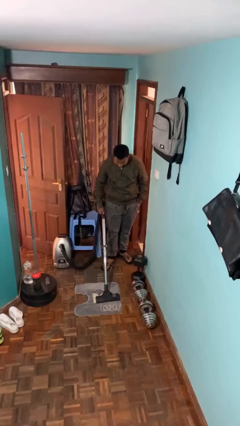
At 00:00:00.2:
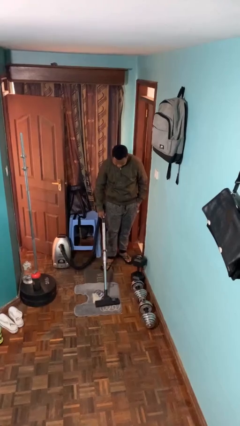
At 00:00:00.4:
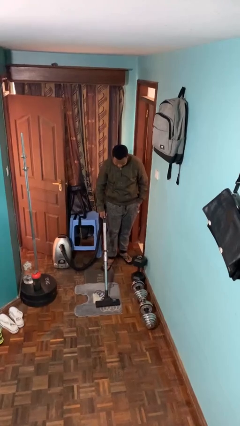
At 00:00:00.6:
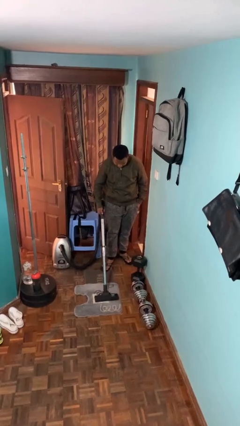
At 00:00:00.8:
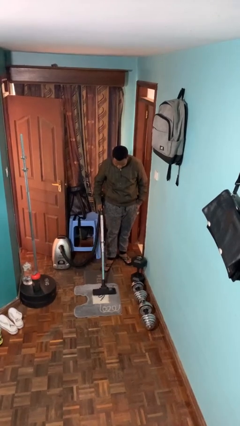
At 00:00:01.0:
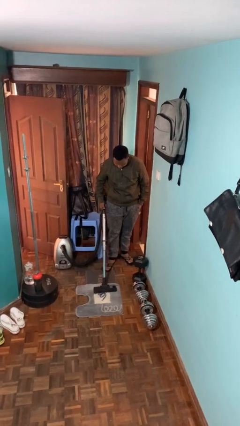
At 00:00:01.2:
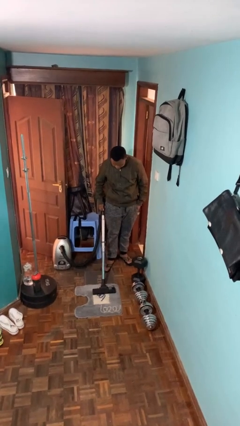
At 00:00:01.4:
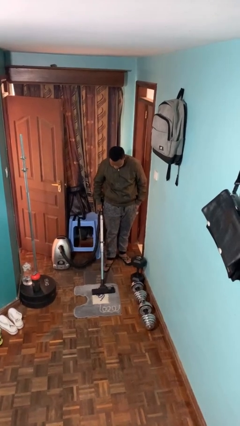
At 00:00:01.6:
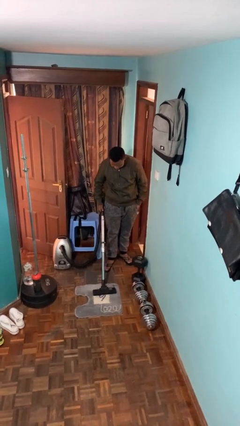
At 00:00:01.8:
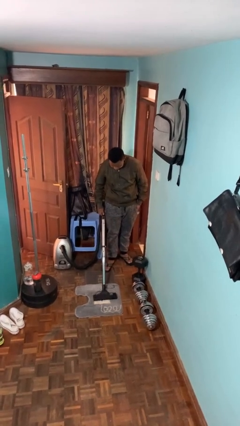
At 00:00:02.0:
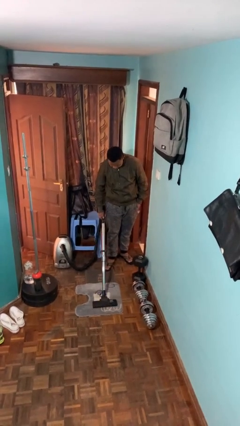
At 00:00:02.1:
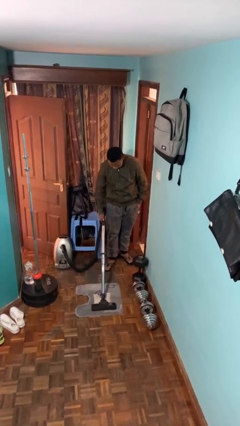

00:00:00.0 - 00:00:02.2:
person vacuums carpet

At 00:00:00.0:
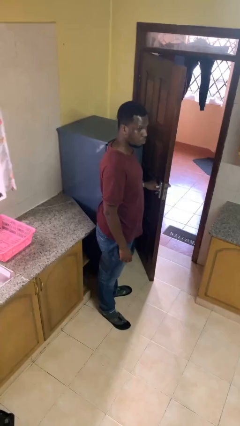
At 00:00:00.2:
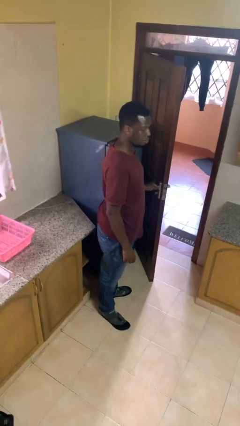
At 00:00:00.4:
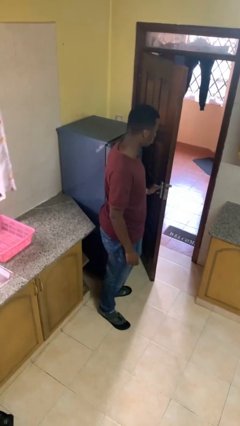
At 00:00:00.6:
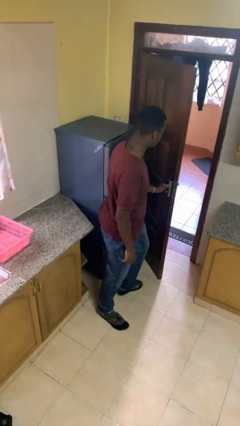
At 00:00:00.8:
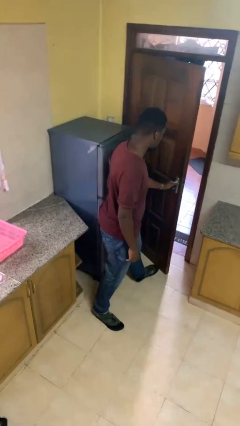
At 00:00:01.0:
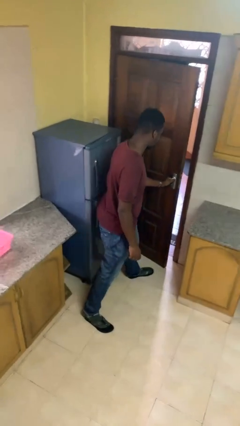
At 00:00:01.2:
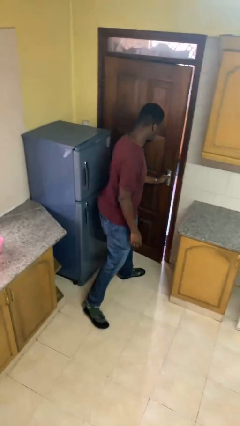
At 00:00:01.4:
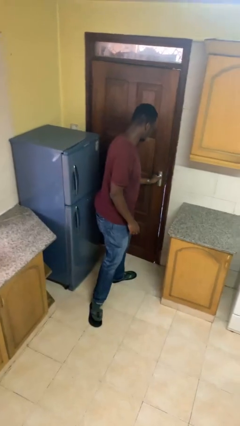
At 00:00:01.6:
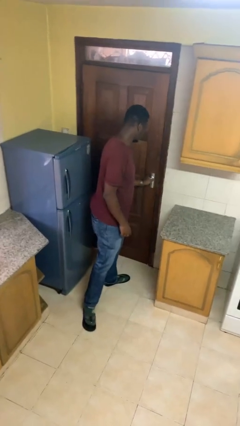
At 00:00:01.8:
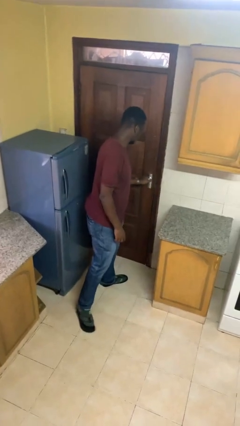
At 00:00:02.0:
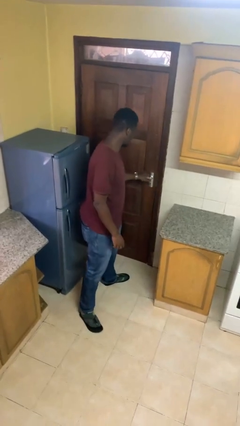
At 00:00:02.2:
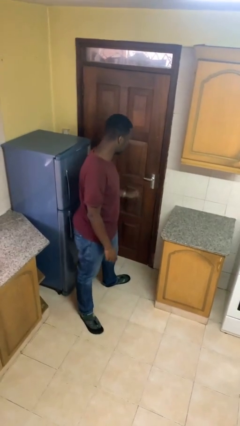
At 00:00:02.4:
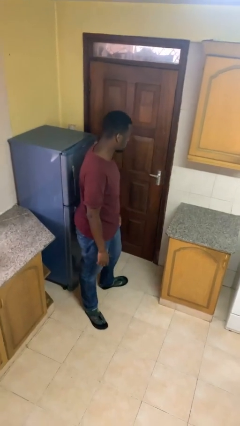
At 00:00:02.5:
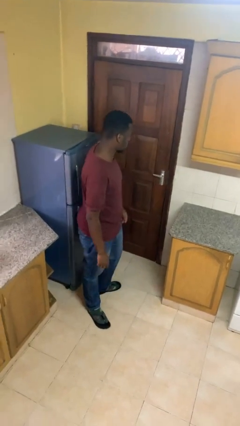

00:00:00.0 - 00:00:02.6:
person closes facility door

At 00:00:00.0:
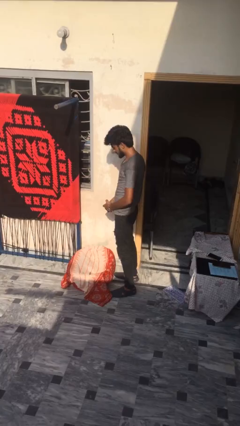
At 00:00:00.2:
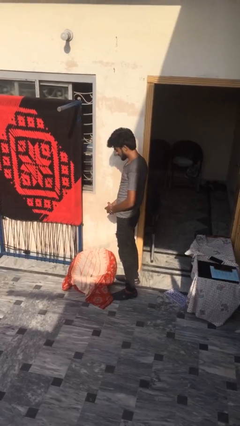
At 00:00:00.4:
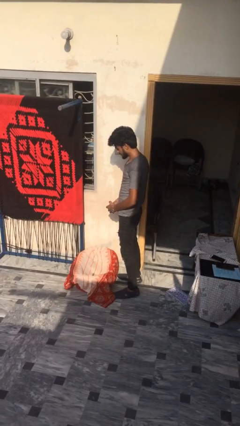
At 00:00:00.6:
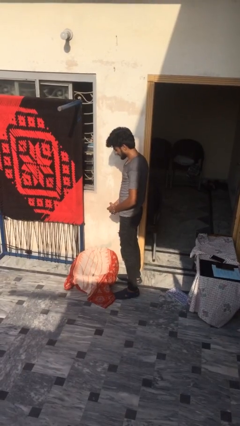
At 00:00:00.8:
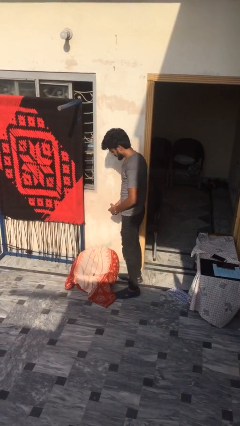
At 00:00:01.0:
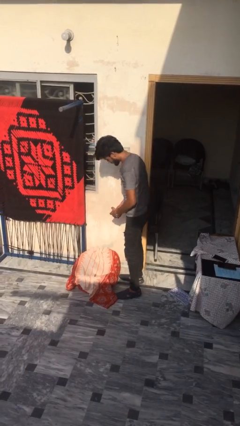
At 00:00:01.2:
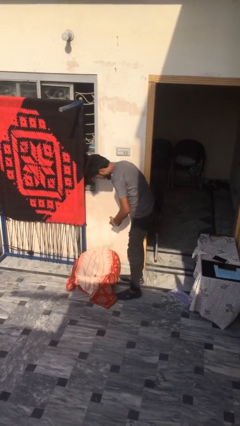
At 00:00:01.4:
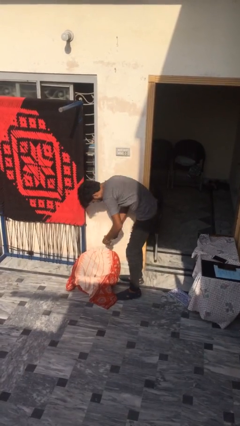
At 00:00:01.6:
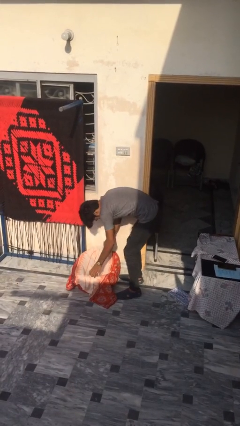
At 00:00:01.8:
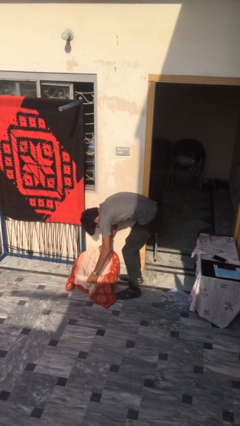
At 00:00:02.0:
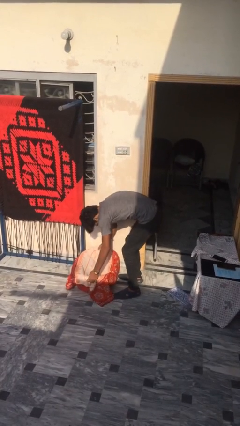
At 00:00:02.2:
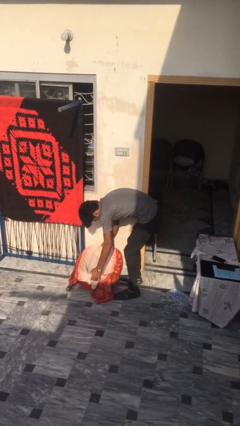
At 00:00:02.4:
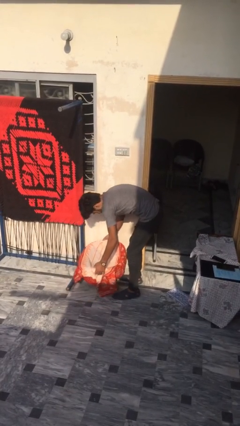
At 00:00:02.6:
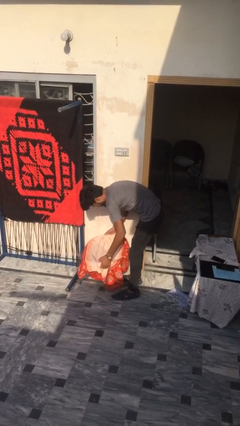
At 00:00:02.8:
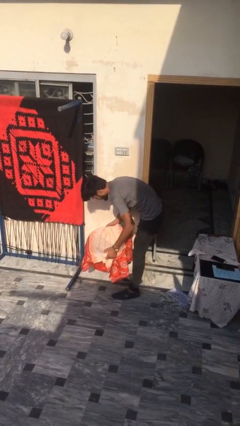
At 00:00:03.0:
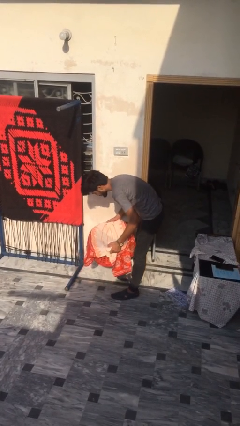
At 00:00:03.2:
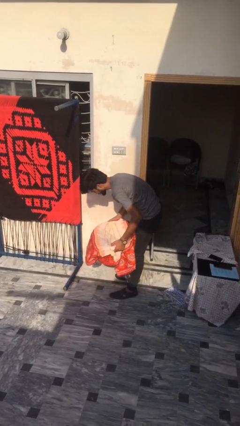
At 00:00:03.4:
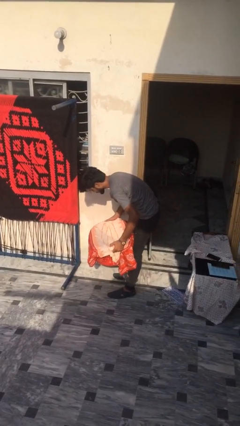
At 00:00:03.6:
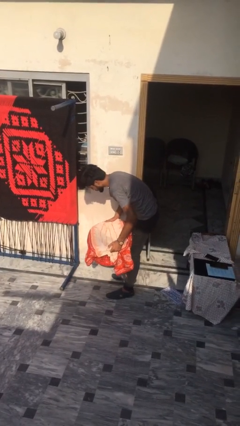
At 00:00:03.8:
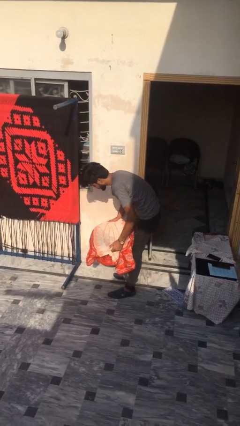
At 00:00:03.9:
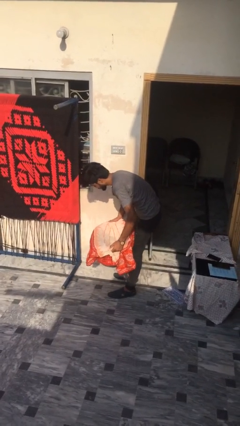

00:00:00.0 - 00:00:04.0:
person picks up object from floor

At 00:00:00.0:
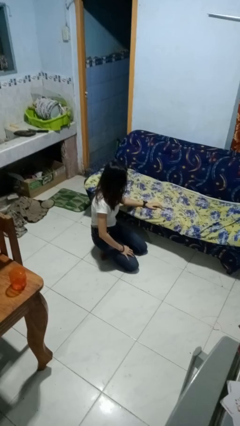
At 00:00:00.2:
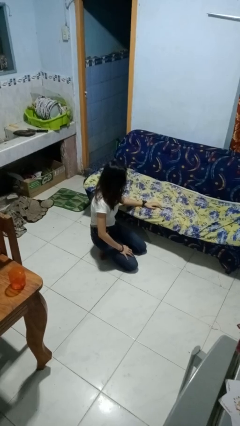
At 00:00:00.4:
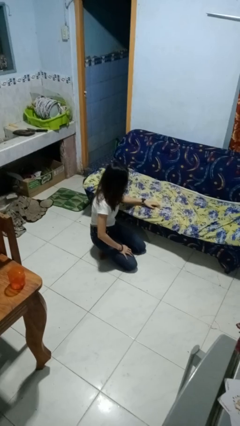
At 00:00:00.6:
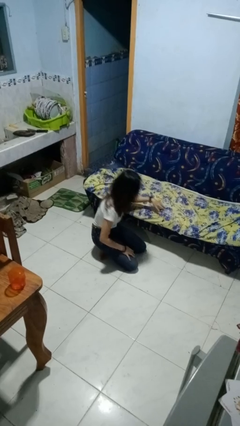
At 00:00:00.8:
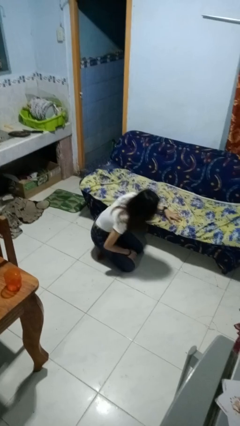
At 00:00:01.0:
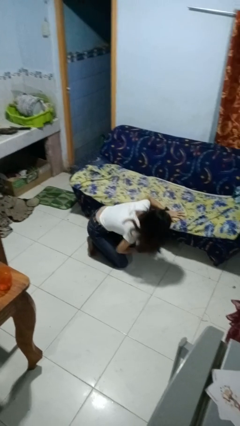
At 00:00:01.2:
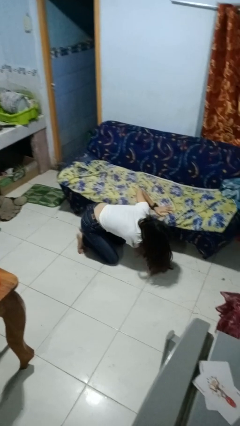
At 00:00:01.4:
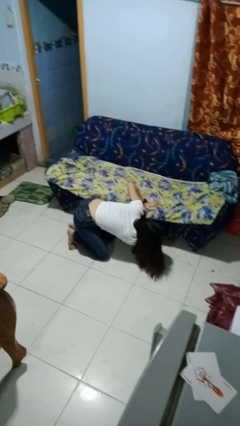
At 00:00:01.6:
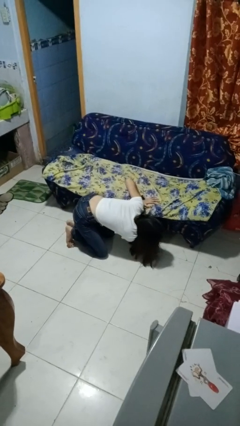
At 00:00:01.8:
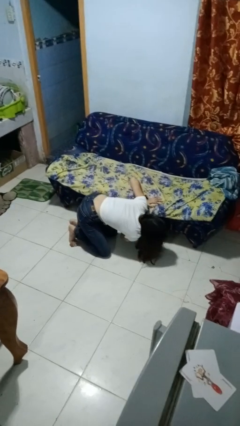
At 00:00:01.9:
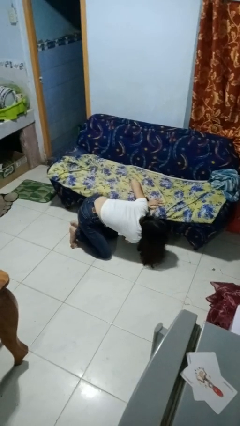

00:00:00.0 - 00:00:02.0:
person searches in couch

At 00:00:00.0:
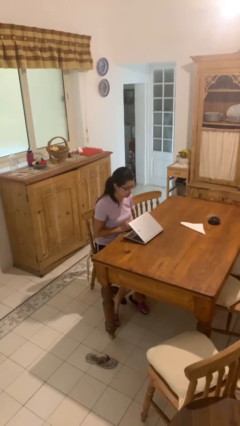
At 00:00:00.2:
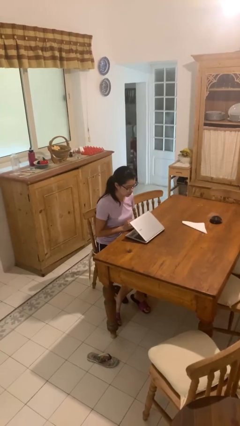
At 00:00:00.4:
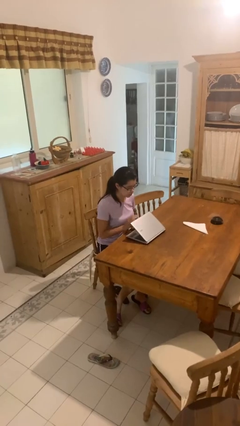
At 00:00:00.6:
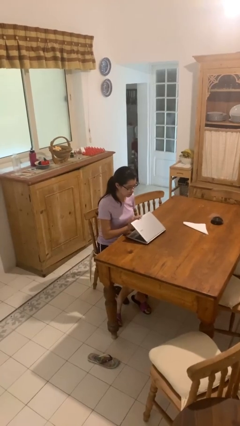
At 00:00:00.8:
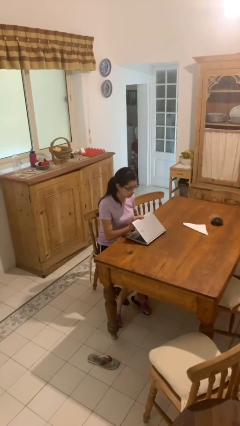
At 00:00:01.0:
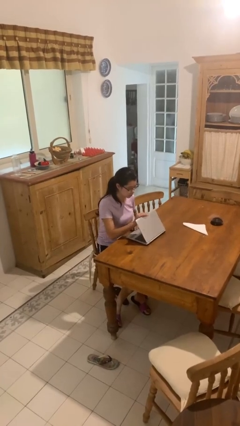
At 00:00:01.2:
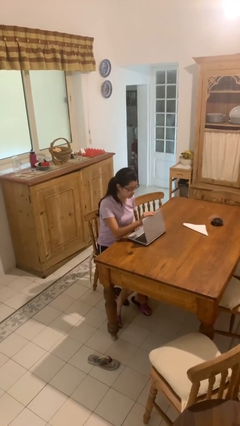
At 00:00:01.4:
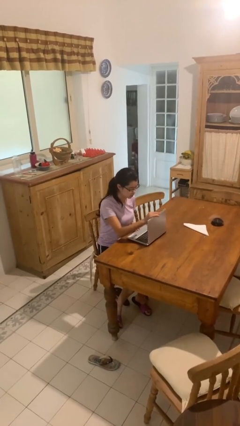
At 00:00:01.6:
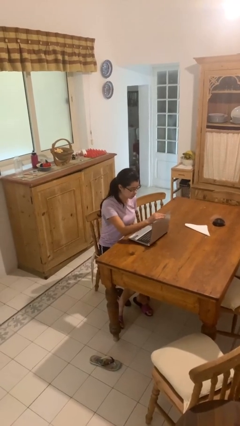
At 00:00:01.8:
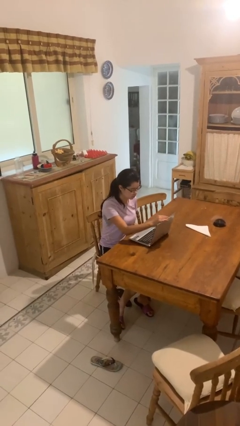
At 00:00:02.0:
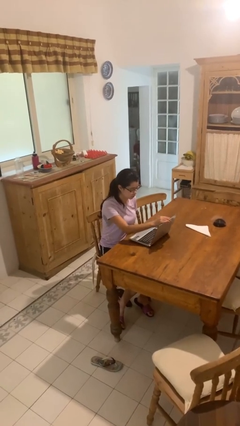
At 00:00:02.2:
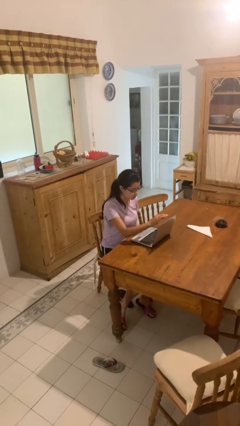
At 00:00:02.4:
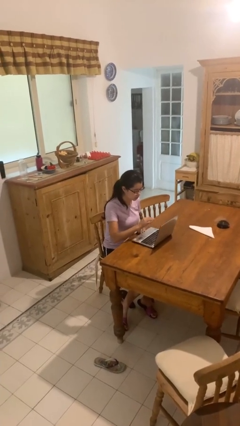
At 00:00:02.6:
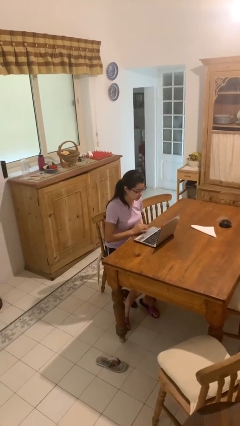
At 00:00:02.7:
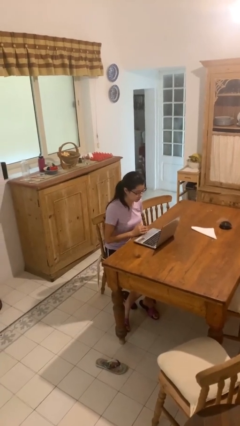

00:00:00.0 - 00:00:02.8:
person opens laptop

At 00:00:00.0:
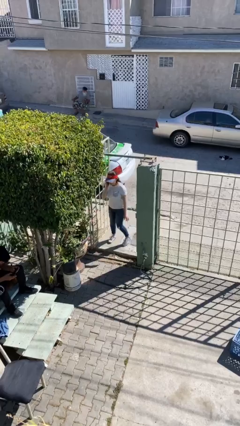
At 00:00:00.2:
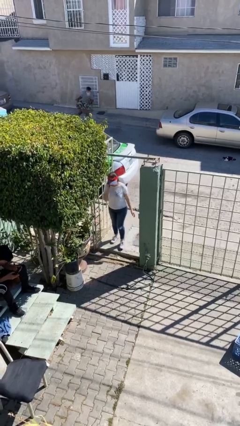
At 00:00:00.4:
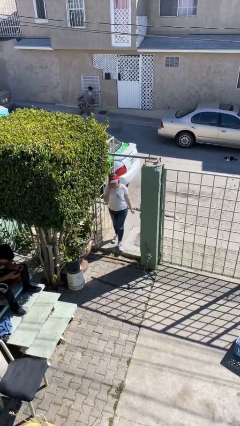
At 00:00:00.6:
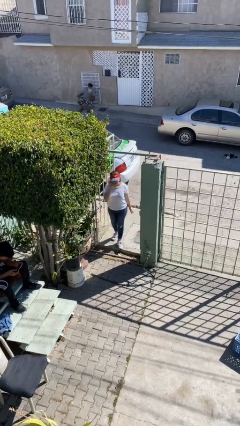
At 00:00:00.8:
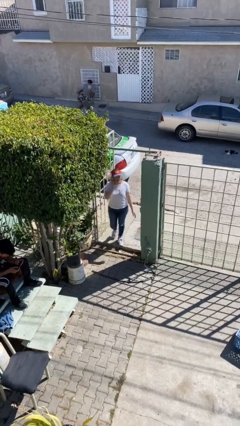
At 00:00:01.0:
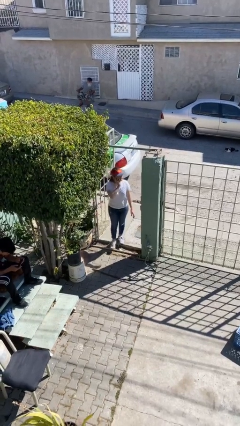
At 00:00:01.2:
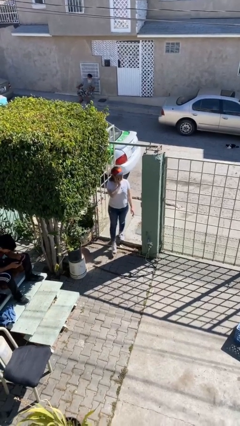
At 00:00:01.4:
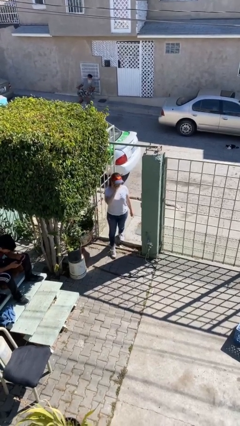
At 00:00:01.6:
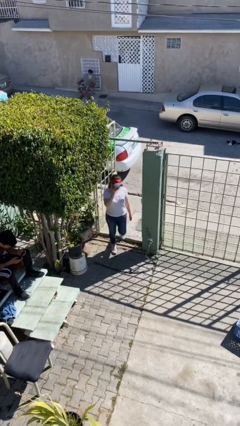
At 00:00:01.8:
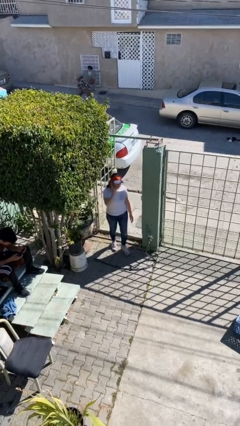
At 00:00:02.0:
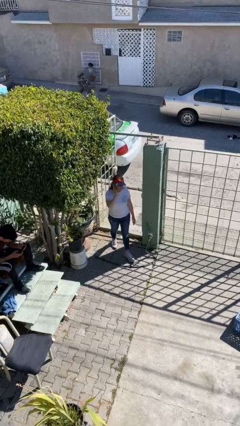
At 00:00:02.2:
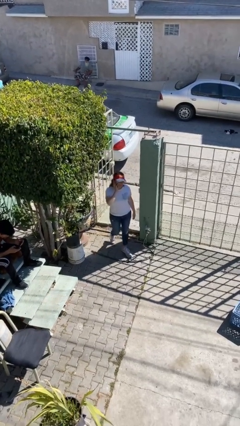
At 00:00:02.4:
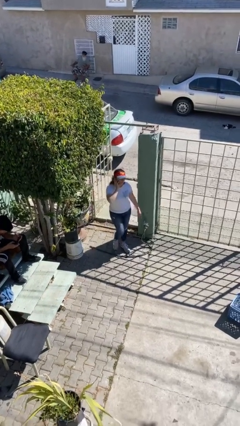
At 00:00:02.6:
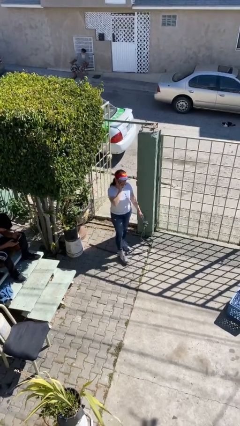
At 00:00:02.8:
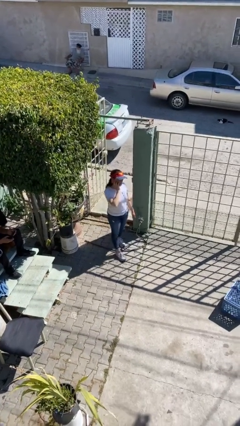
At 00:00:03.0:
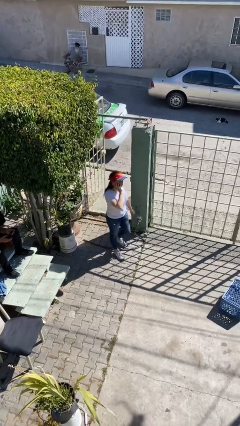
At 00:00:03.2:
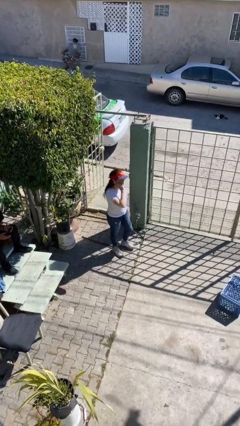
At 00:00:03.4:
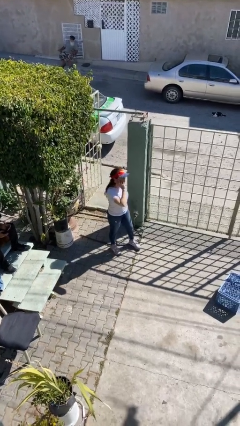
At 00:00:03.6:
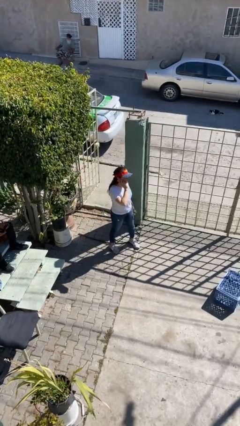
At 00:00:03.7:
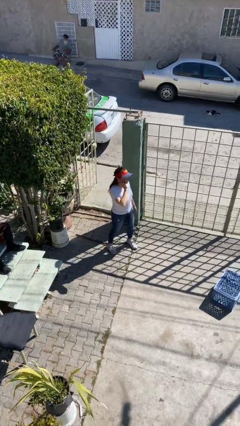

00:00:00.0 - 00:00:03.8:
person enters scene through structure
